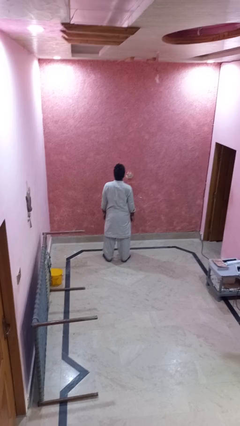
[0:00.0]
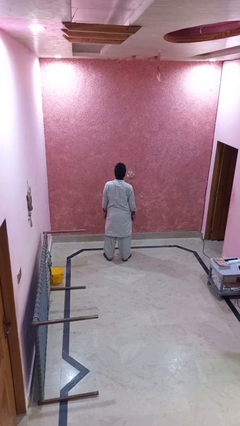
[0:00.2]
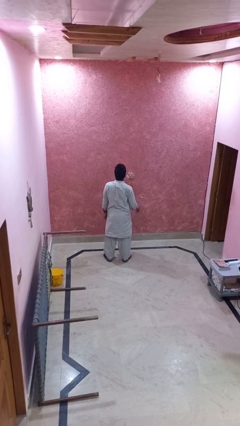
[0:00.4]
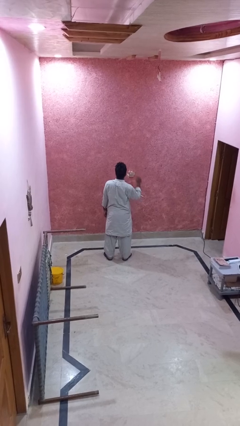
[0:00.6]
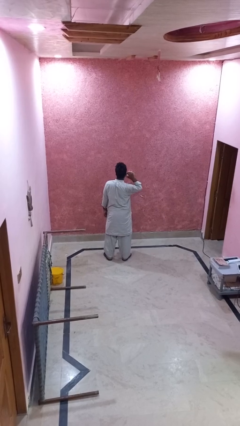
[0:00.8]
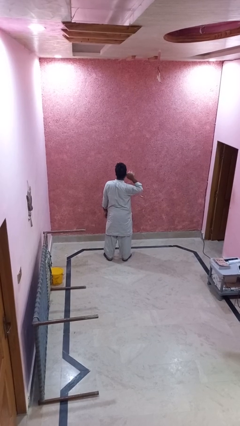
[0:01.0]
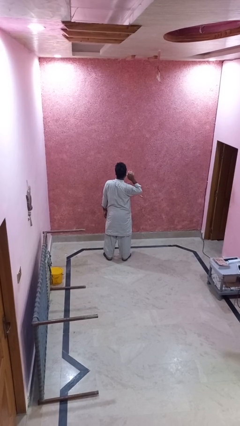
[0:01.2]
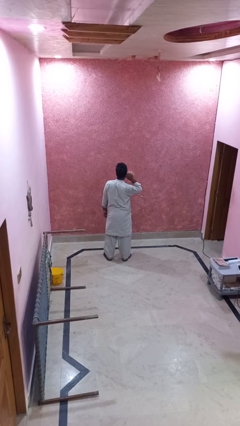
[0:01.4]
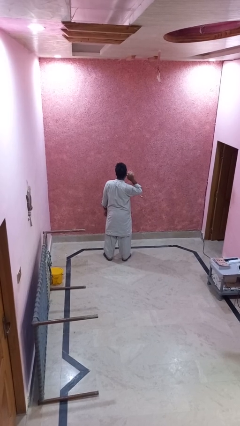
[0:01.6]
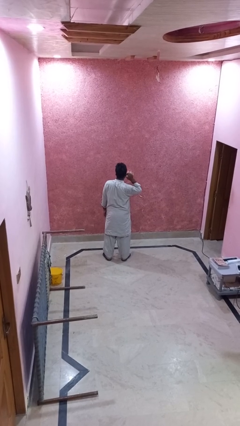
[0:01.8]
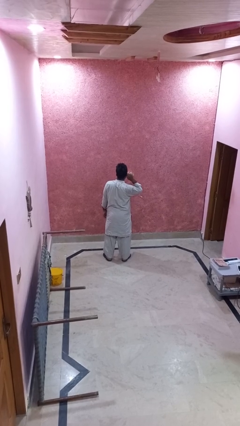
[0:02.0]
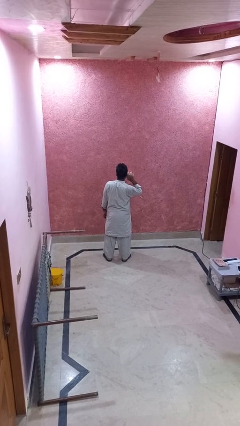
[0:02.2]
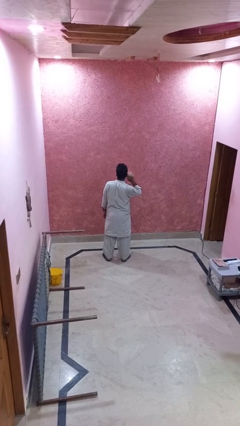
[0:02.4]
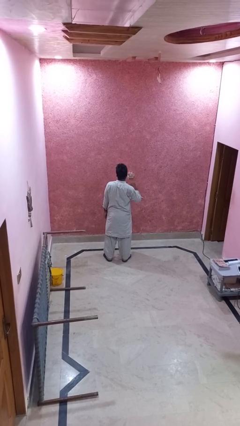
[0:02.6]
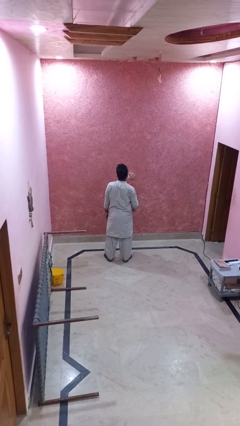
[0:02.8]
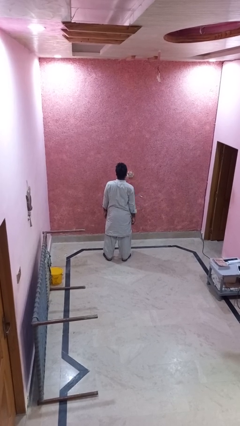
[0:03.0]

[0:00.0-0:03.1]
person touches earlobe

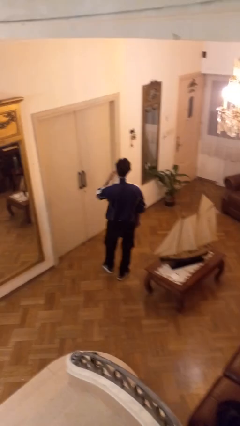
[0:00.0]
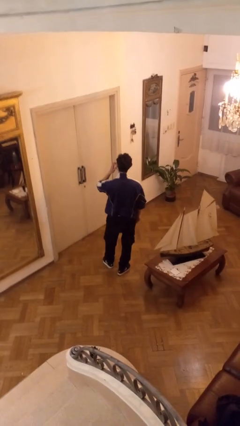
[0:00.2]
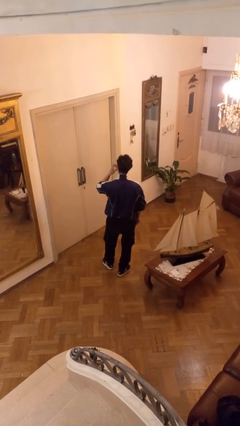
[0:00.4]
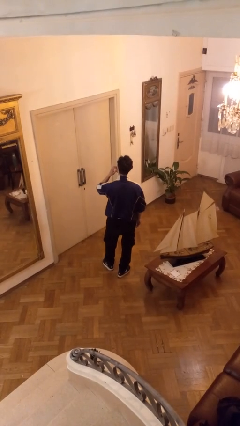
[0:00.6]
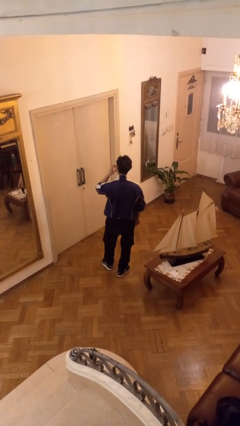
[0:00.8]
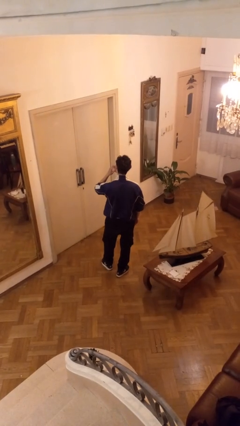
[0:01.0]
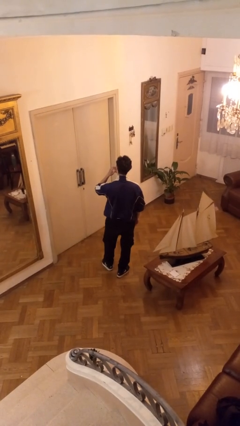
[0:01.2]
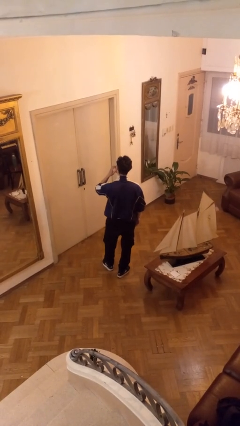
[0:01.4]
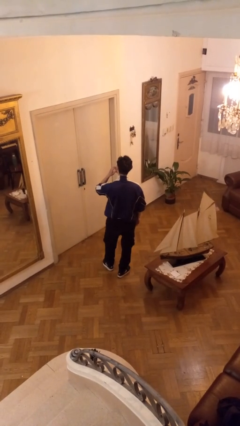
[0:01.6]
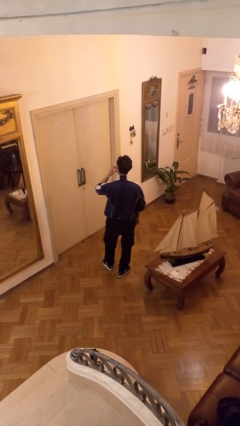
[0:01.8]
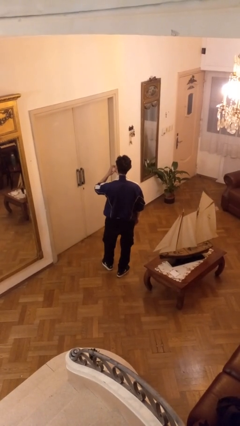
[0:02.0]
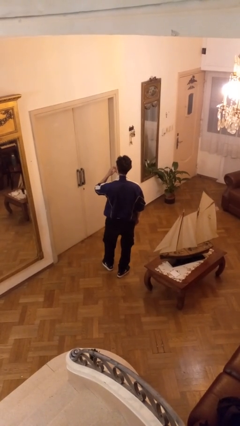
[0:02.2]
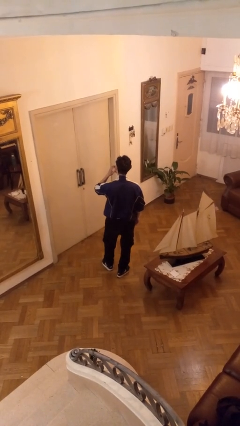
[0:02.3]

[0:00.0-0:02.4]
person scratches face

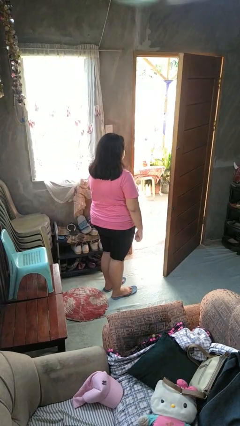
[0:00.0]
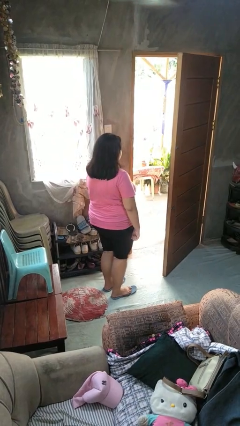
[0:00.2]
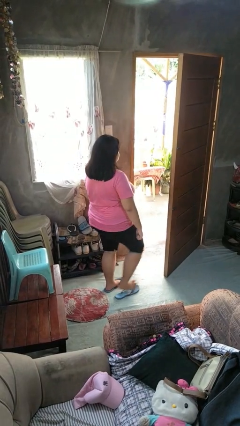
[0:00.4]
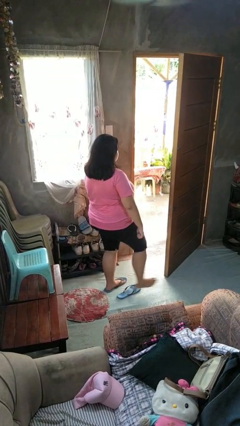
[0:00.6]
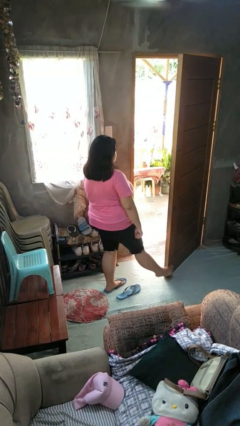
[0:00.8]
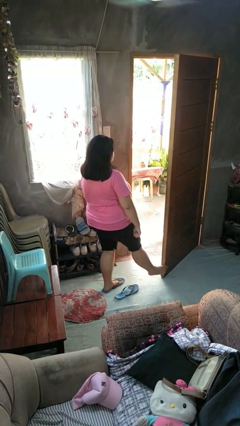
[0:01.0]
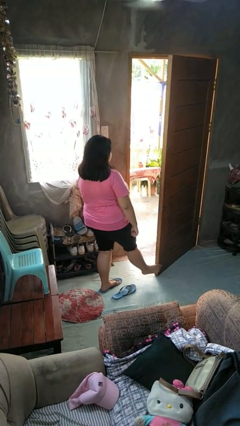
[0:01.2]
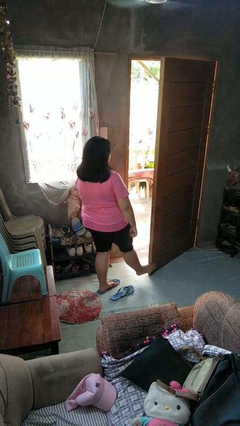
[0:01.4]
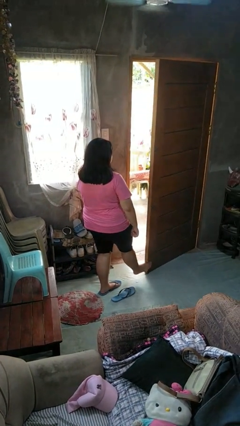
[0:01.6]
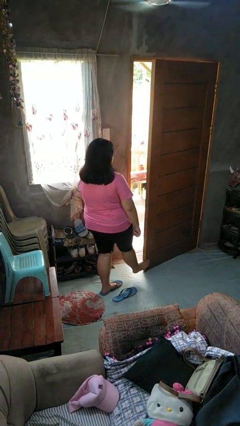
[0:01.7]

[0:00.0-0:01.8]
person closes door with foot

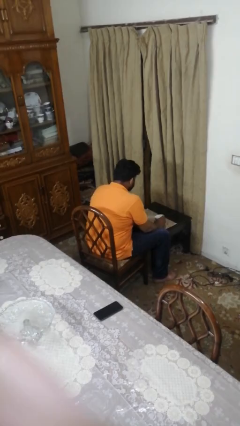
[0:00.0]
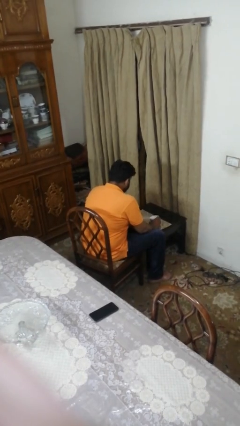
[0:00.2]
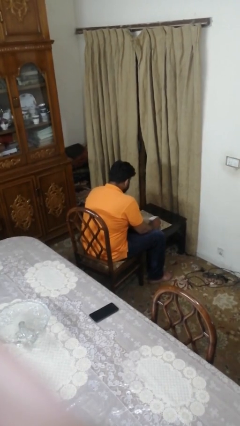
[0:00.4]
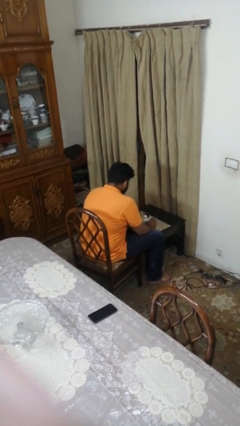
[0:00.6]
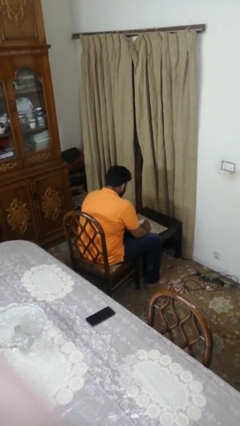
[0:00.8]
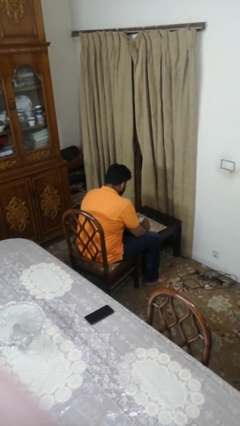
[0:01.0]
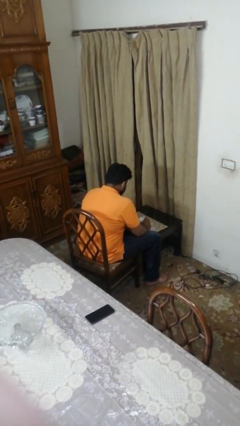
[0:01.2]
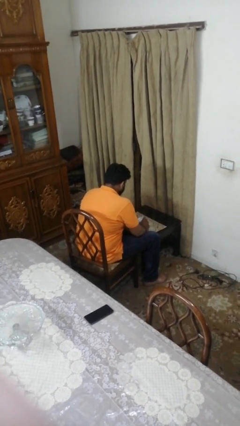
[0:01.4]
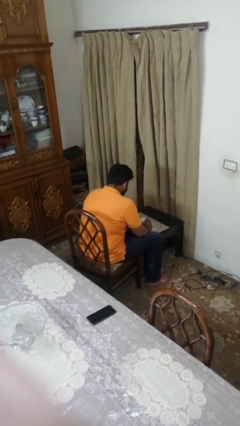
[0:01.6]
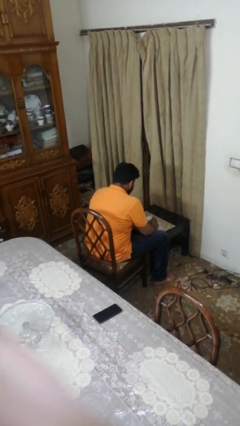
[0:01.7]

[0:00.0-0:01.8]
person stirs mug

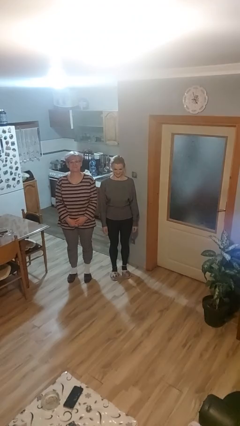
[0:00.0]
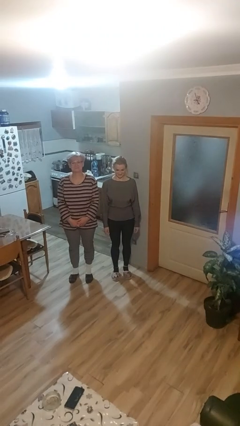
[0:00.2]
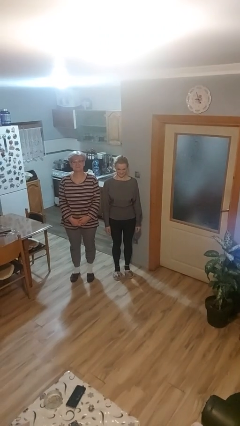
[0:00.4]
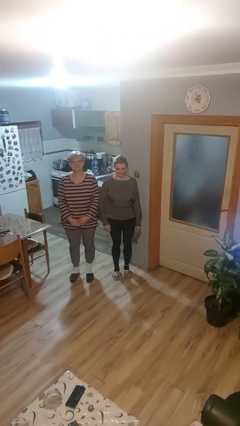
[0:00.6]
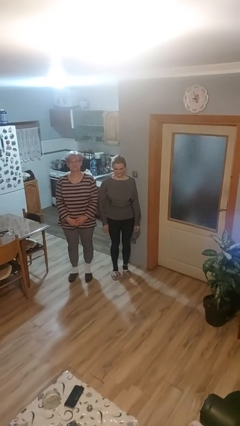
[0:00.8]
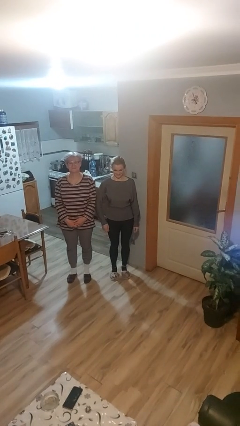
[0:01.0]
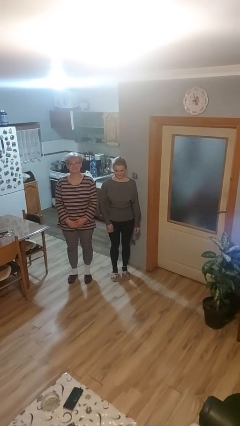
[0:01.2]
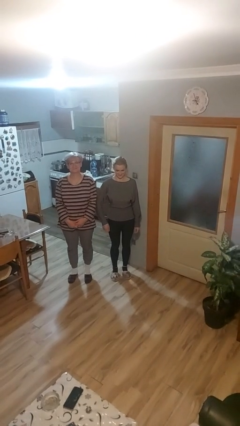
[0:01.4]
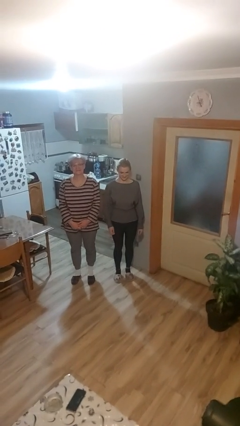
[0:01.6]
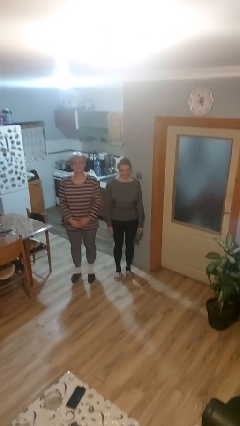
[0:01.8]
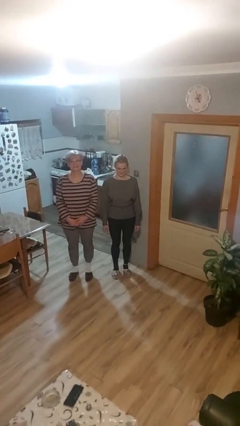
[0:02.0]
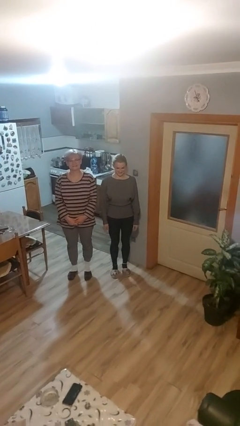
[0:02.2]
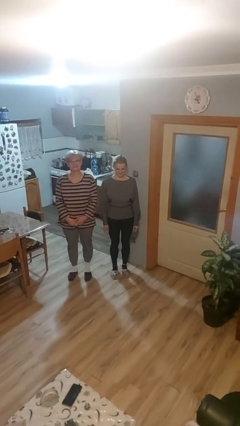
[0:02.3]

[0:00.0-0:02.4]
person nudges person with elbow

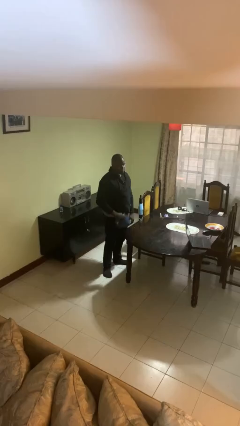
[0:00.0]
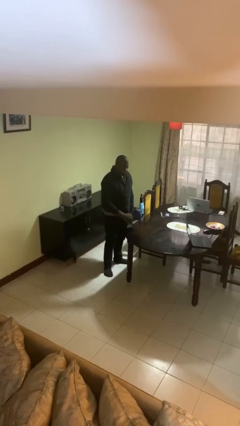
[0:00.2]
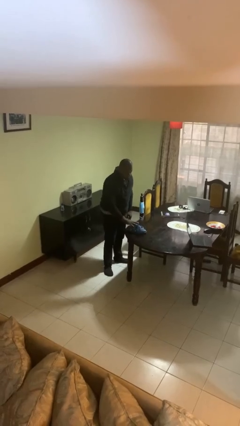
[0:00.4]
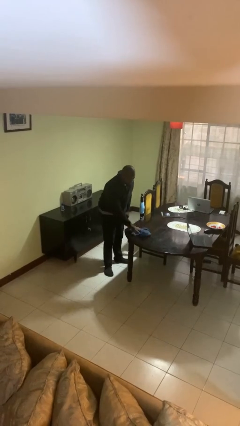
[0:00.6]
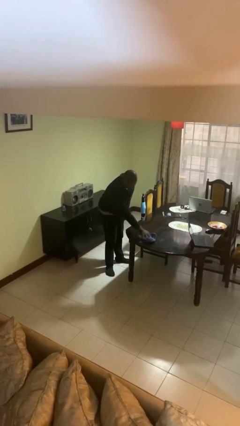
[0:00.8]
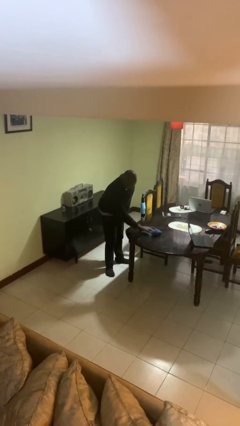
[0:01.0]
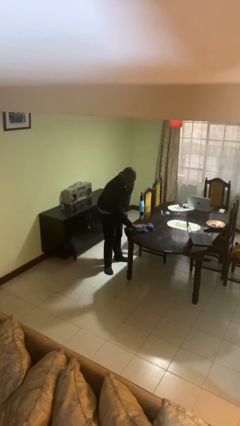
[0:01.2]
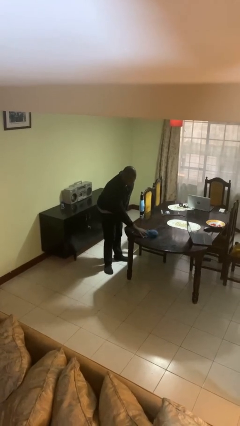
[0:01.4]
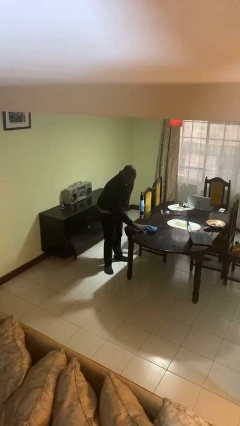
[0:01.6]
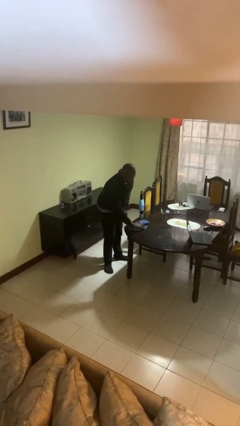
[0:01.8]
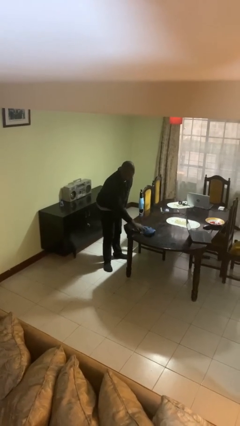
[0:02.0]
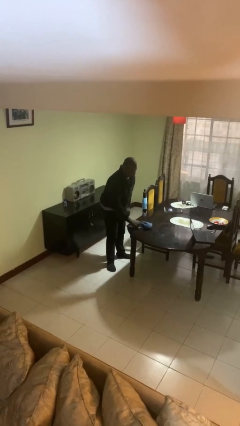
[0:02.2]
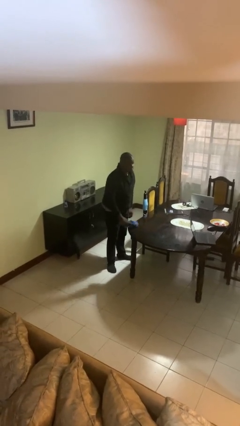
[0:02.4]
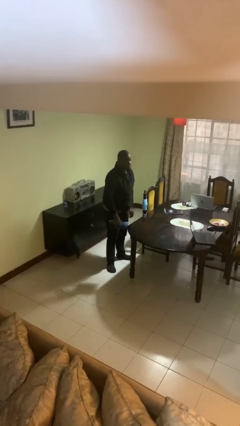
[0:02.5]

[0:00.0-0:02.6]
person cleans table with rag

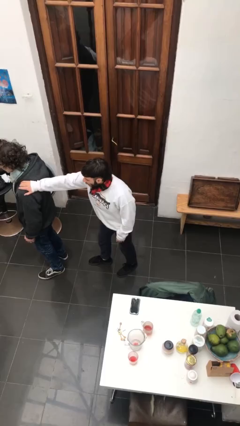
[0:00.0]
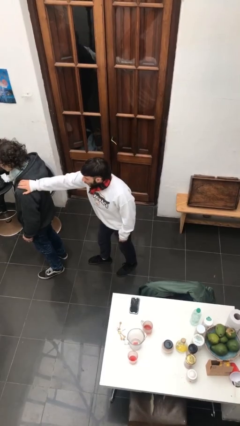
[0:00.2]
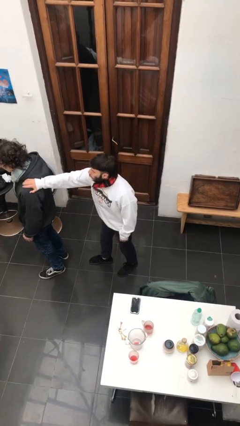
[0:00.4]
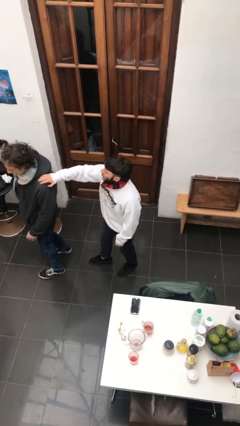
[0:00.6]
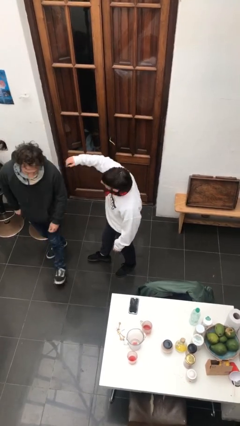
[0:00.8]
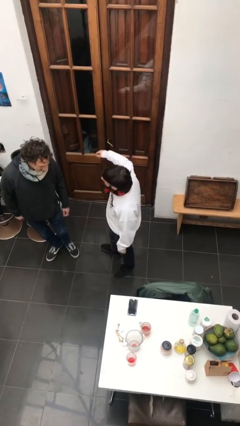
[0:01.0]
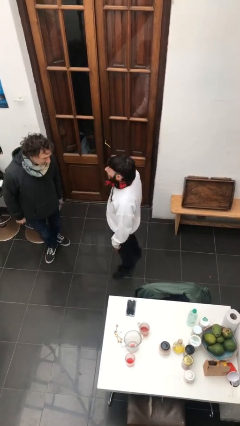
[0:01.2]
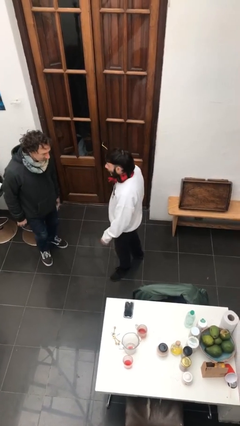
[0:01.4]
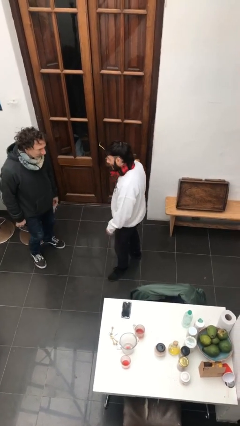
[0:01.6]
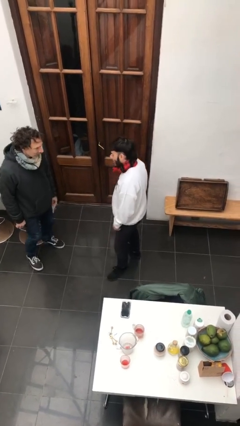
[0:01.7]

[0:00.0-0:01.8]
person spins person around

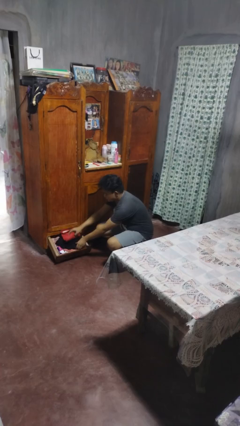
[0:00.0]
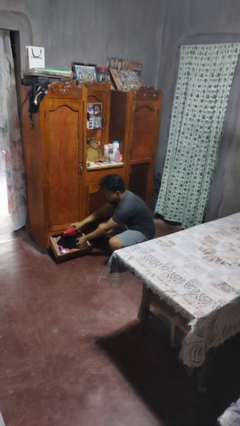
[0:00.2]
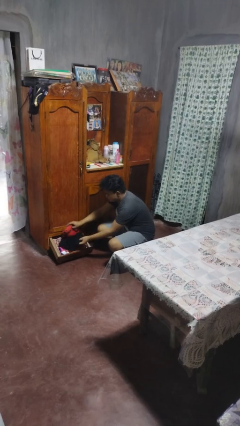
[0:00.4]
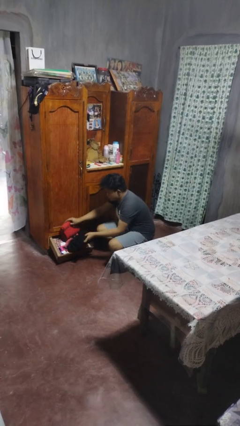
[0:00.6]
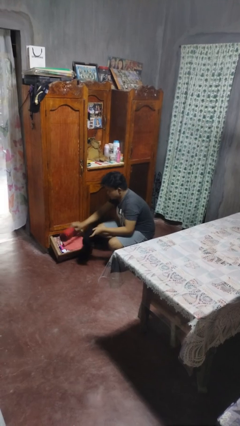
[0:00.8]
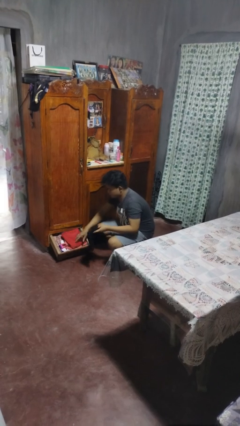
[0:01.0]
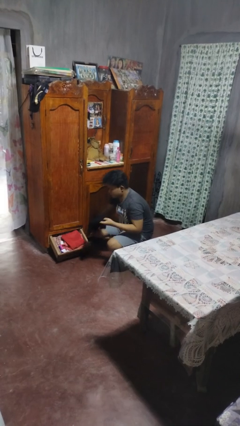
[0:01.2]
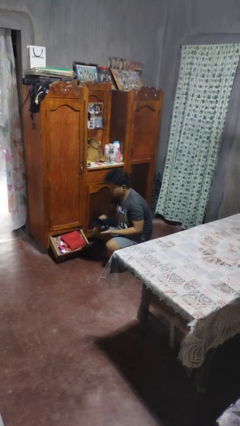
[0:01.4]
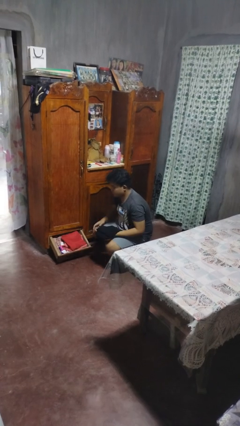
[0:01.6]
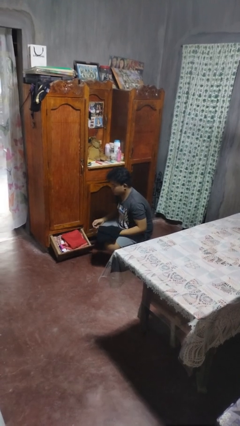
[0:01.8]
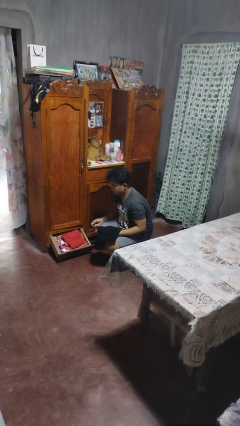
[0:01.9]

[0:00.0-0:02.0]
person takes clothes from dresser
